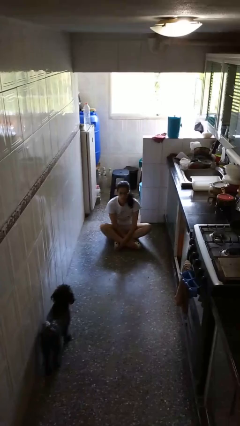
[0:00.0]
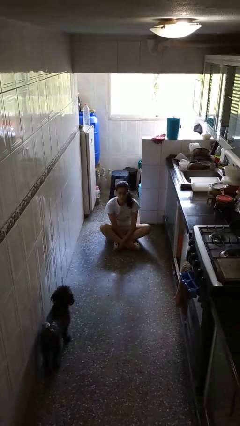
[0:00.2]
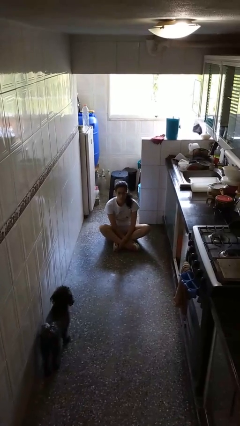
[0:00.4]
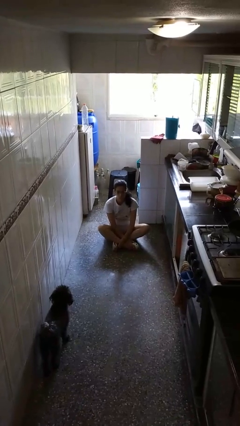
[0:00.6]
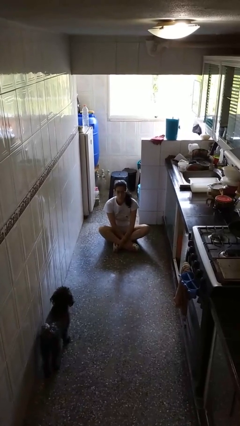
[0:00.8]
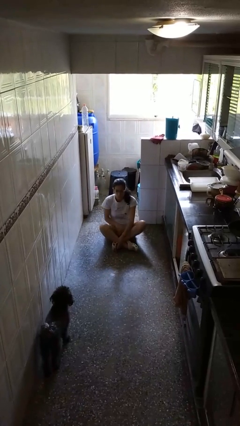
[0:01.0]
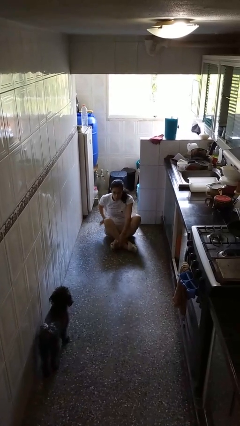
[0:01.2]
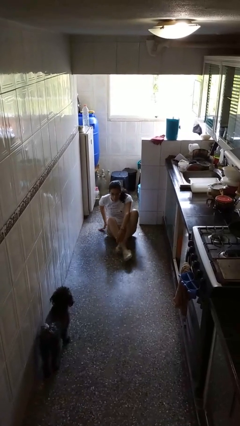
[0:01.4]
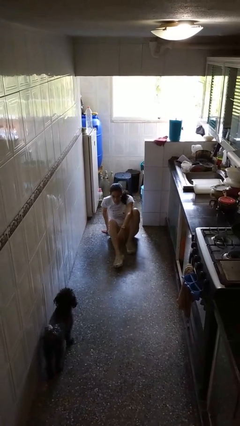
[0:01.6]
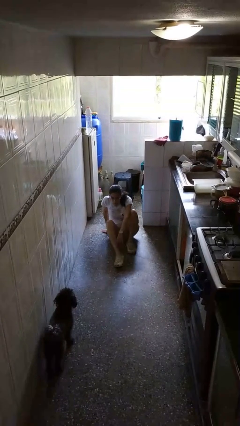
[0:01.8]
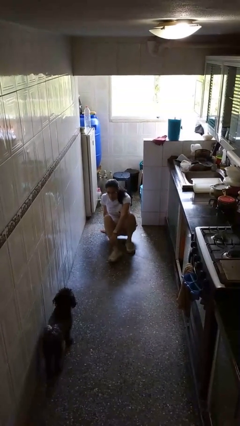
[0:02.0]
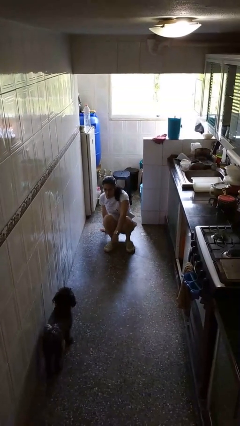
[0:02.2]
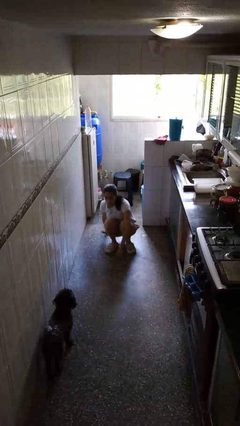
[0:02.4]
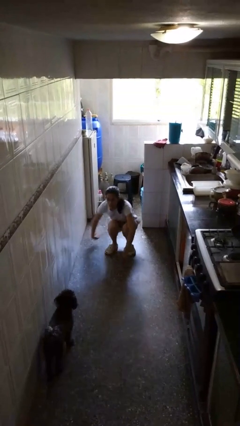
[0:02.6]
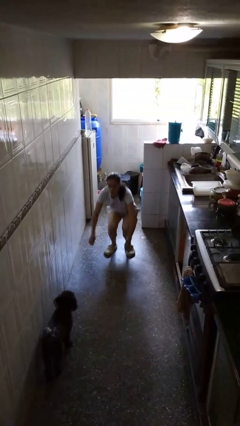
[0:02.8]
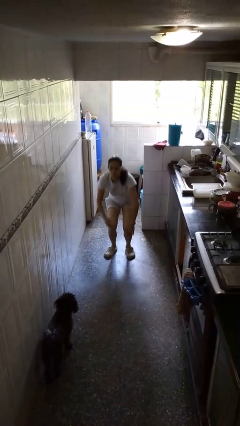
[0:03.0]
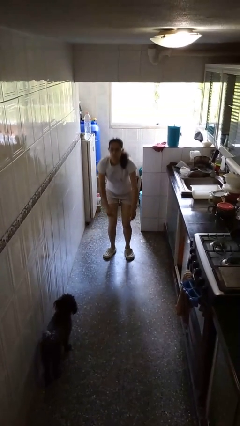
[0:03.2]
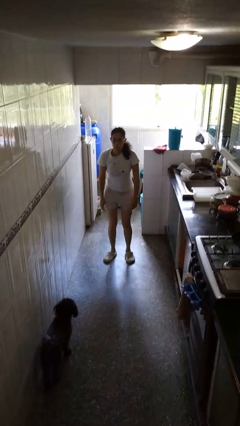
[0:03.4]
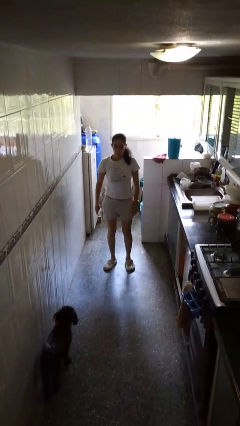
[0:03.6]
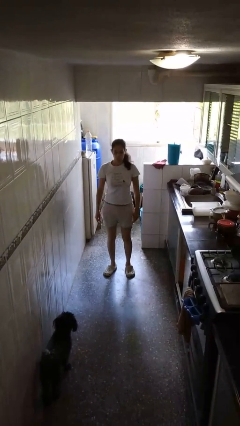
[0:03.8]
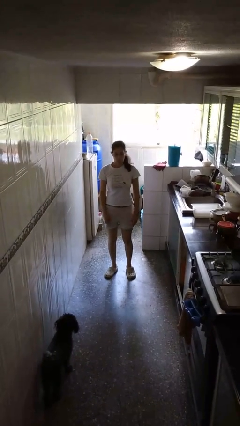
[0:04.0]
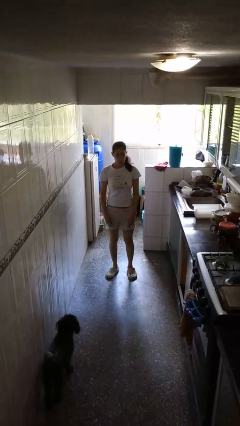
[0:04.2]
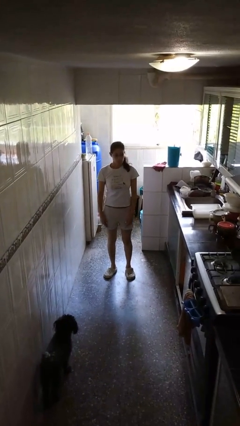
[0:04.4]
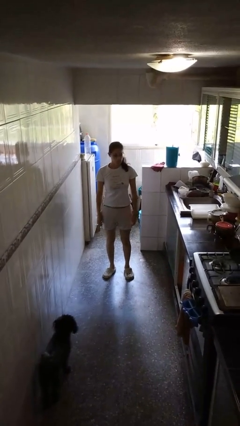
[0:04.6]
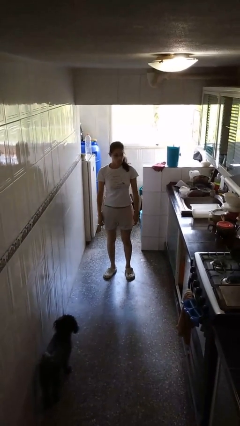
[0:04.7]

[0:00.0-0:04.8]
person stands up from floor

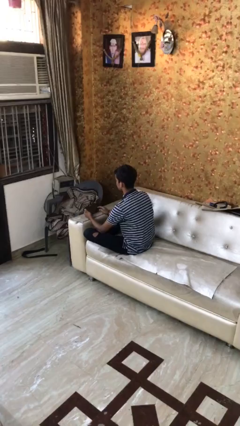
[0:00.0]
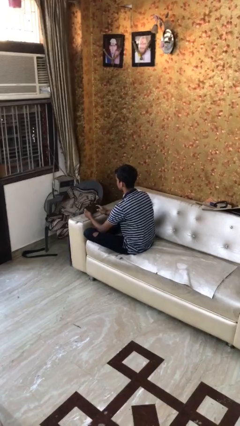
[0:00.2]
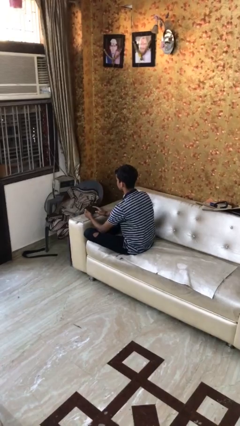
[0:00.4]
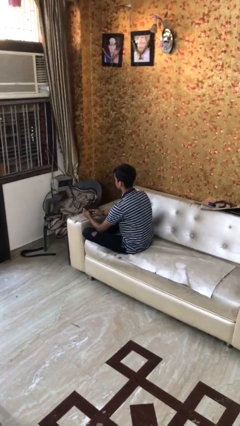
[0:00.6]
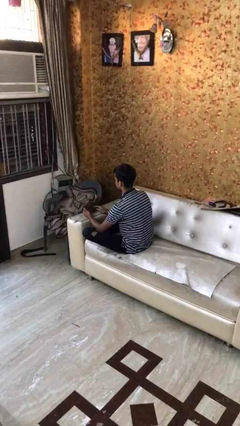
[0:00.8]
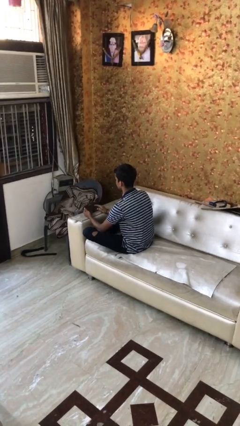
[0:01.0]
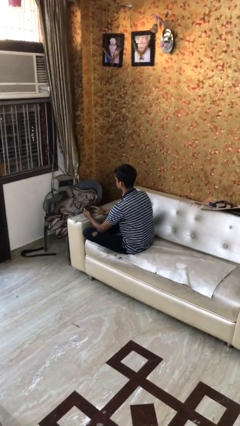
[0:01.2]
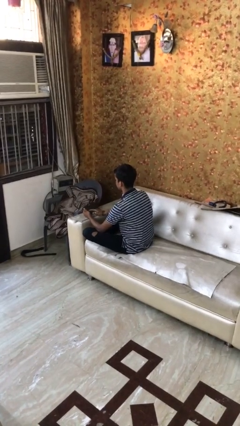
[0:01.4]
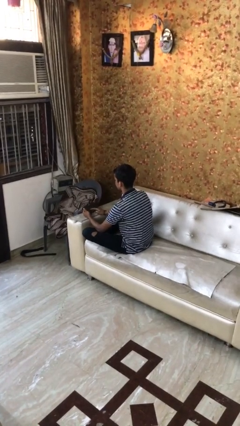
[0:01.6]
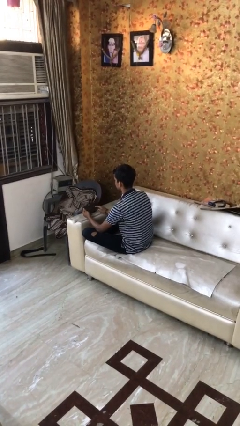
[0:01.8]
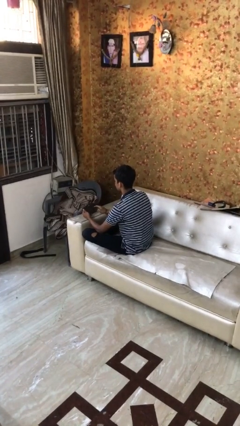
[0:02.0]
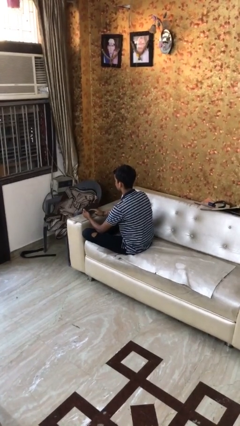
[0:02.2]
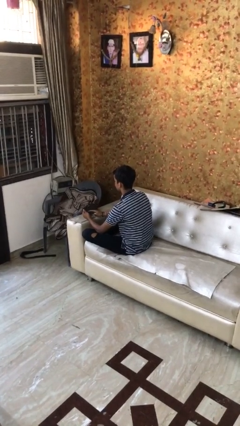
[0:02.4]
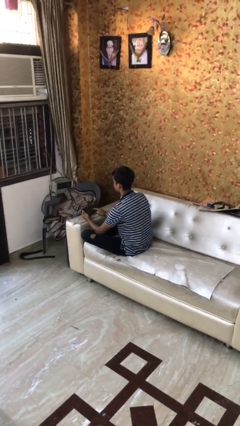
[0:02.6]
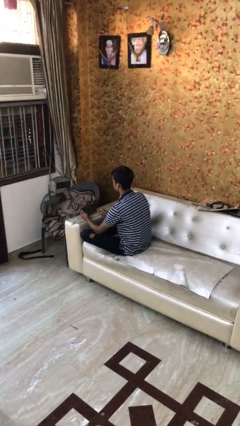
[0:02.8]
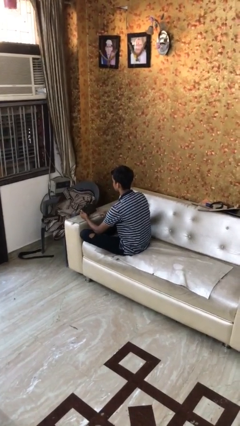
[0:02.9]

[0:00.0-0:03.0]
person interacts with tablet

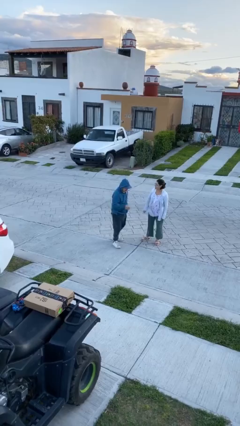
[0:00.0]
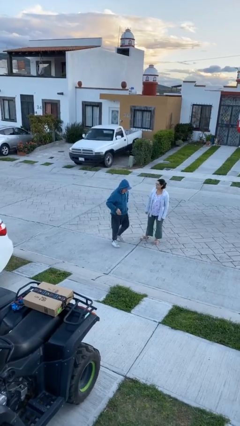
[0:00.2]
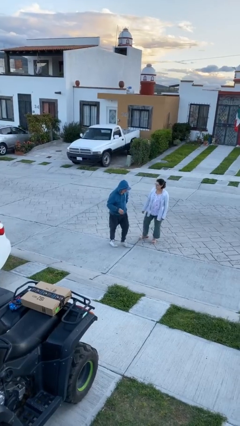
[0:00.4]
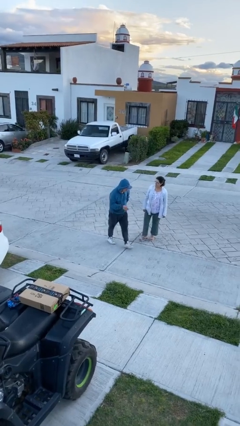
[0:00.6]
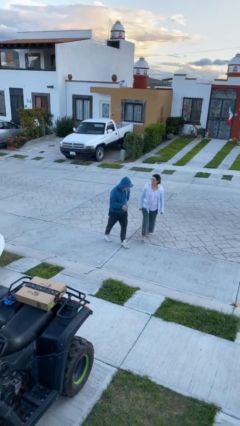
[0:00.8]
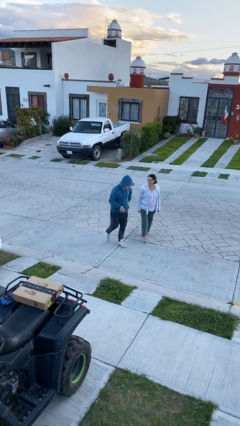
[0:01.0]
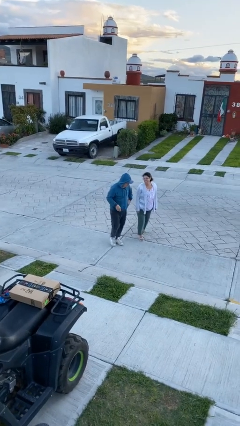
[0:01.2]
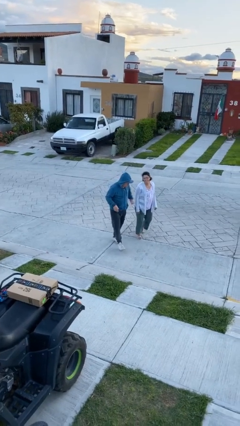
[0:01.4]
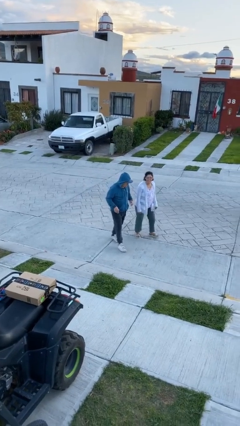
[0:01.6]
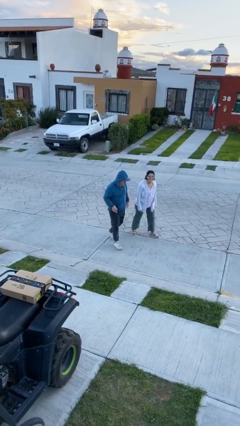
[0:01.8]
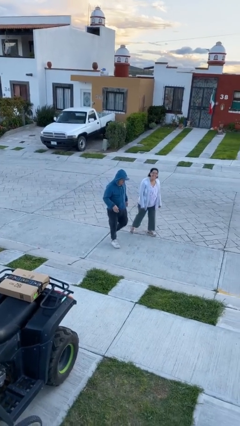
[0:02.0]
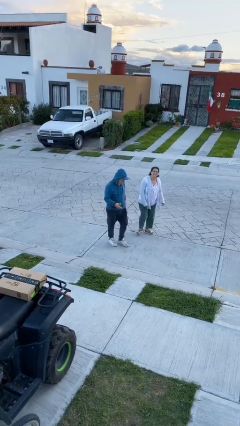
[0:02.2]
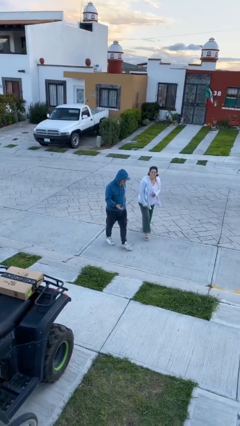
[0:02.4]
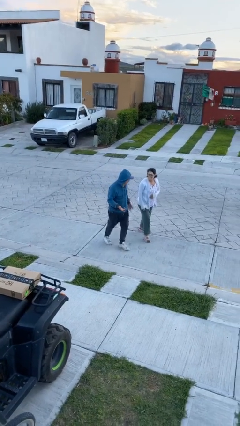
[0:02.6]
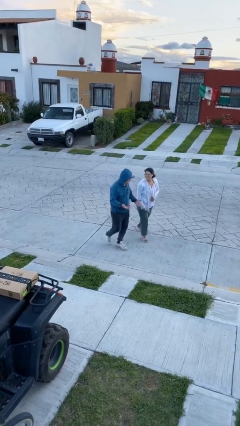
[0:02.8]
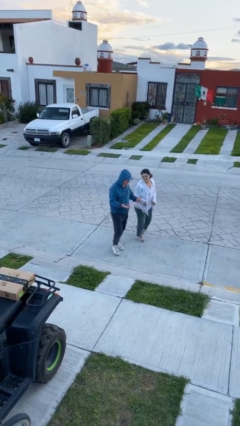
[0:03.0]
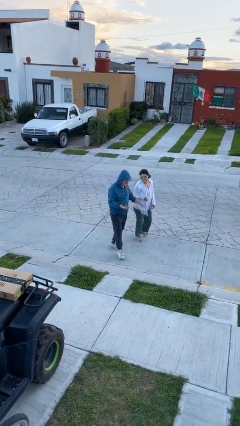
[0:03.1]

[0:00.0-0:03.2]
person talks to person

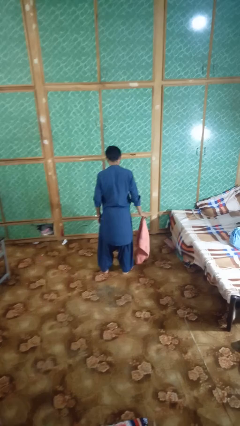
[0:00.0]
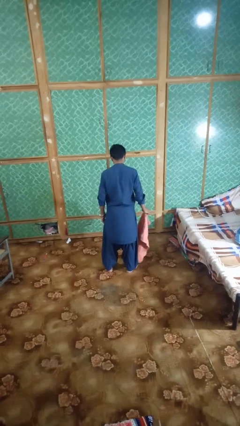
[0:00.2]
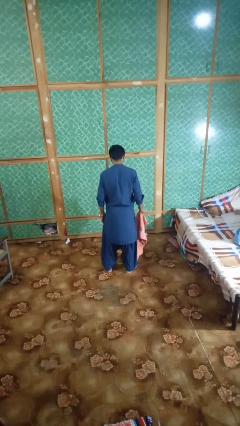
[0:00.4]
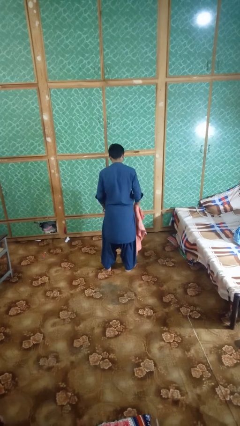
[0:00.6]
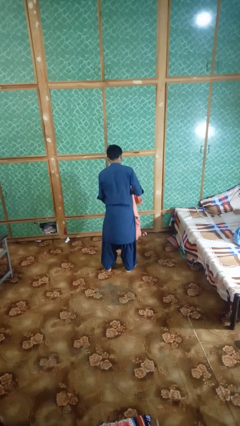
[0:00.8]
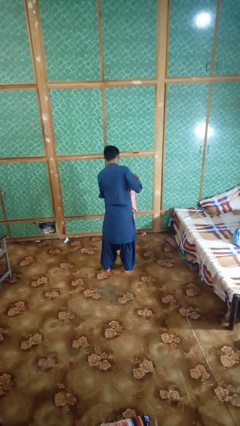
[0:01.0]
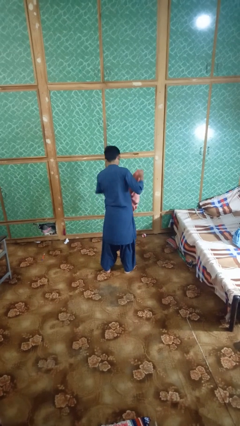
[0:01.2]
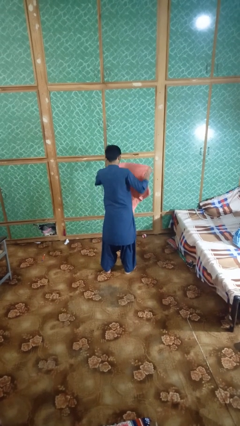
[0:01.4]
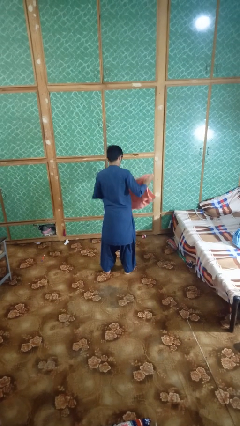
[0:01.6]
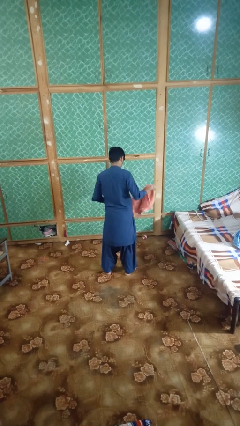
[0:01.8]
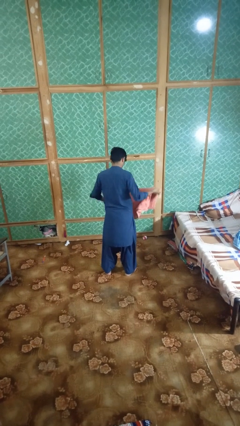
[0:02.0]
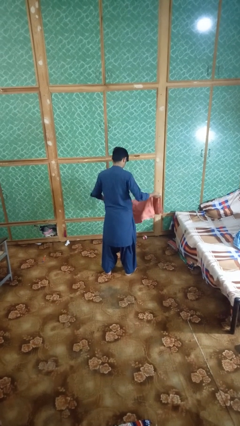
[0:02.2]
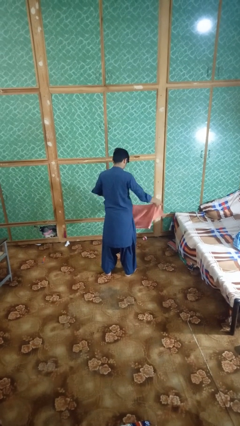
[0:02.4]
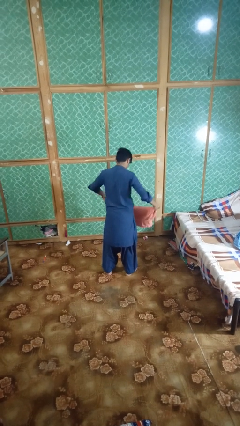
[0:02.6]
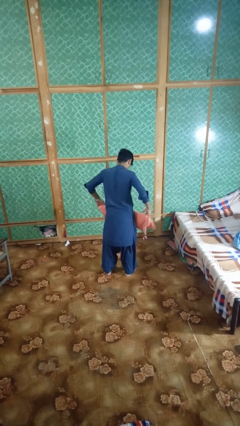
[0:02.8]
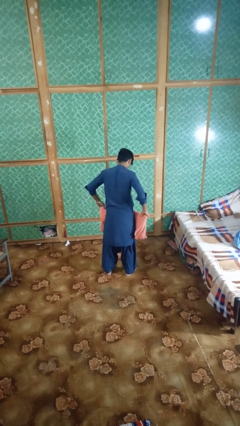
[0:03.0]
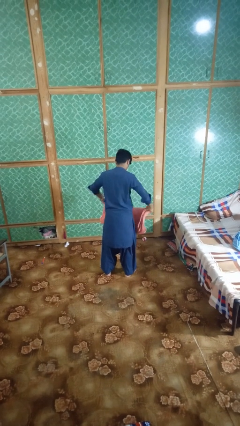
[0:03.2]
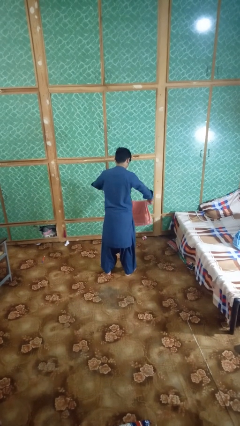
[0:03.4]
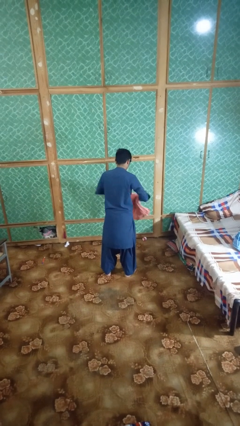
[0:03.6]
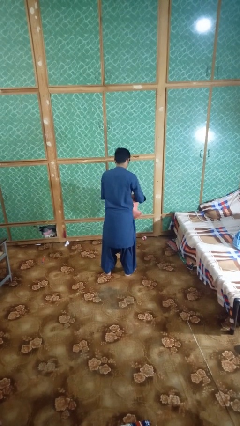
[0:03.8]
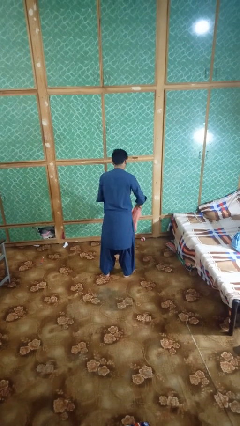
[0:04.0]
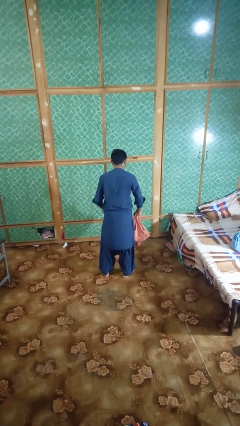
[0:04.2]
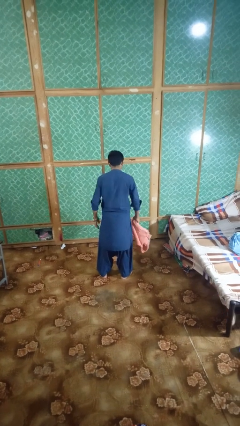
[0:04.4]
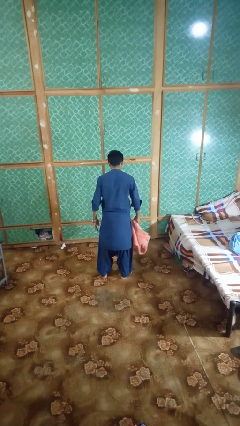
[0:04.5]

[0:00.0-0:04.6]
person folds towel

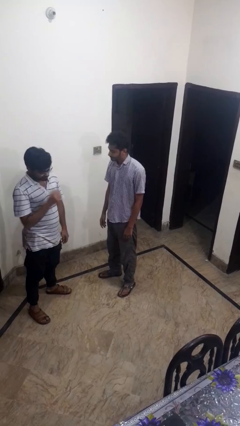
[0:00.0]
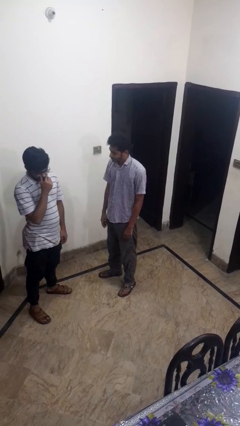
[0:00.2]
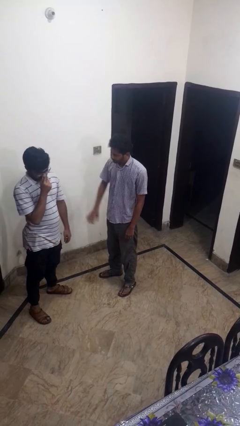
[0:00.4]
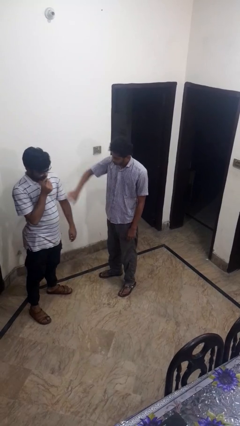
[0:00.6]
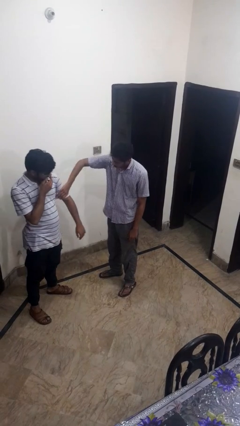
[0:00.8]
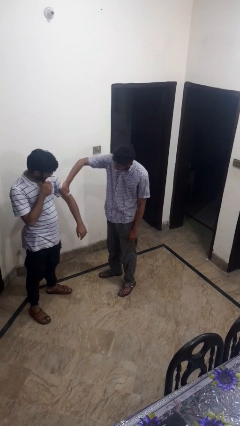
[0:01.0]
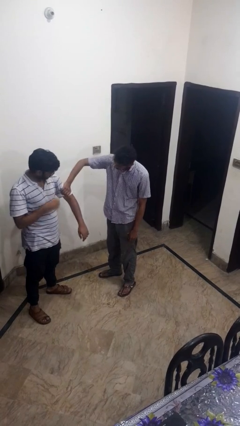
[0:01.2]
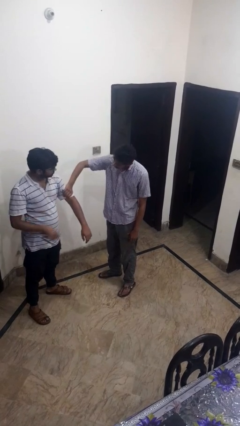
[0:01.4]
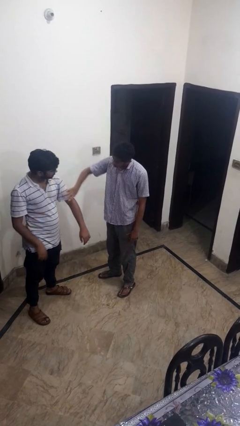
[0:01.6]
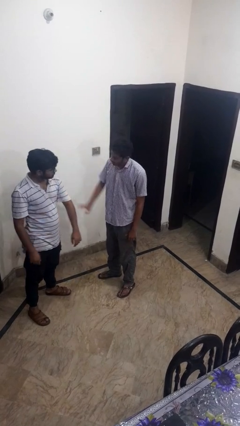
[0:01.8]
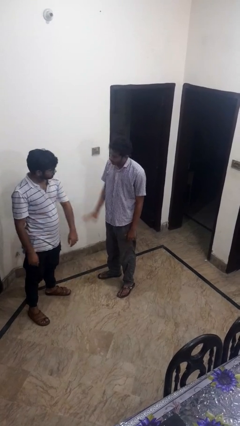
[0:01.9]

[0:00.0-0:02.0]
person grabs person by bicep
